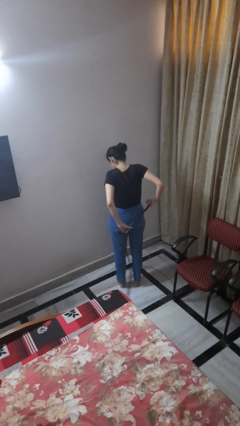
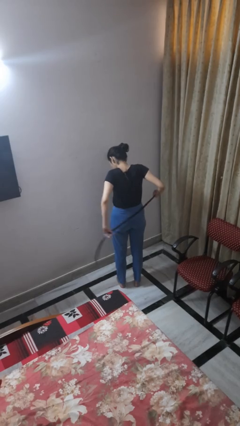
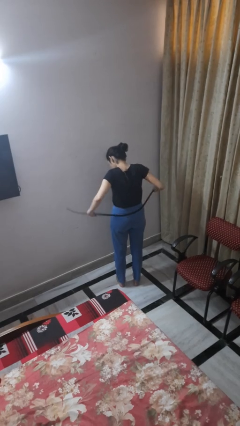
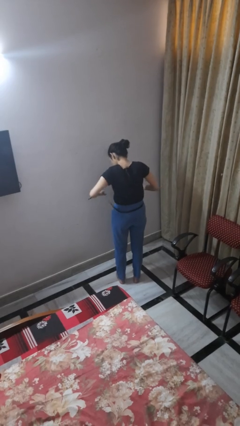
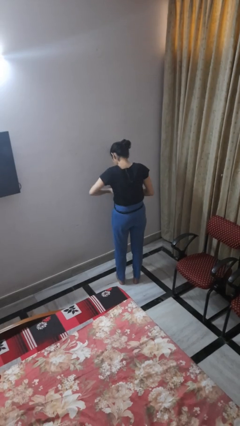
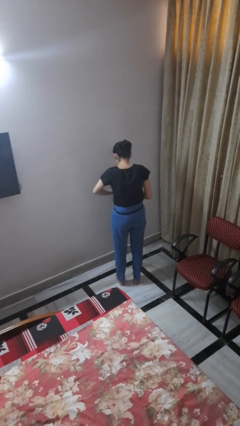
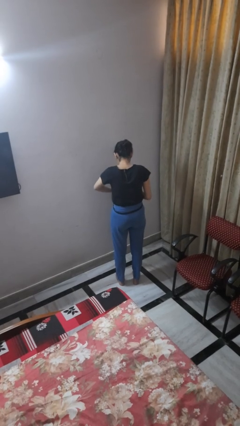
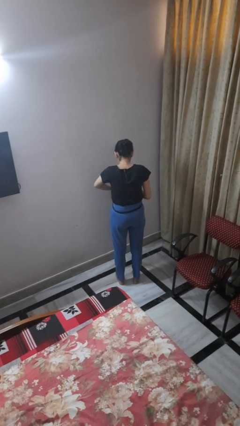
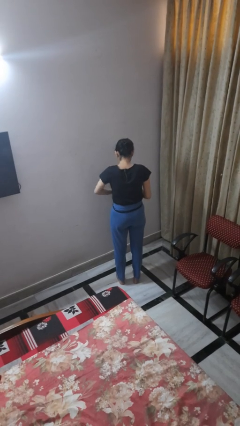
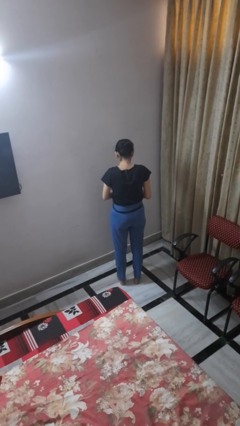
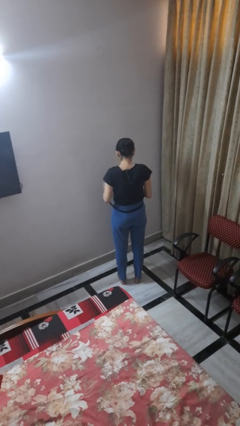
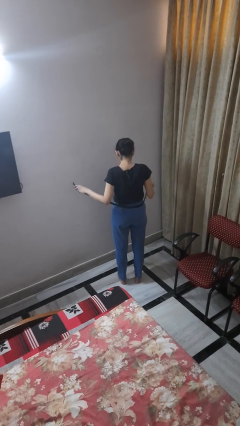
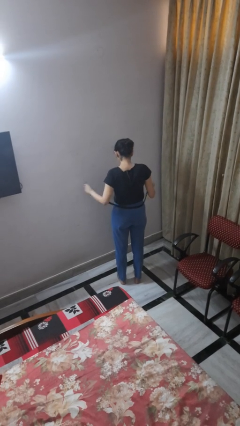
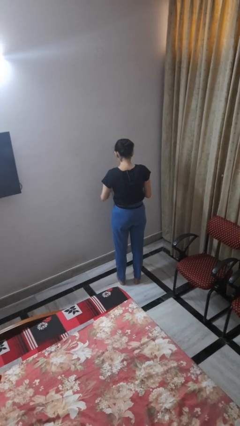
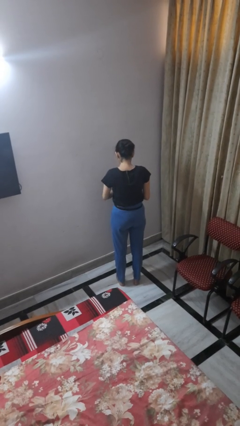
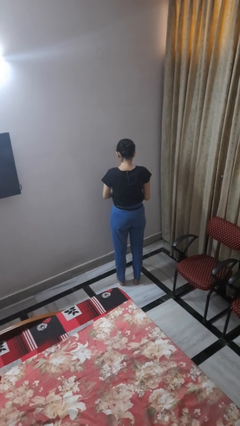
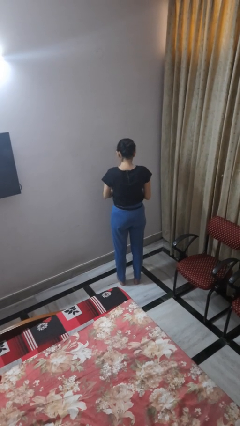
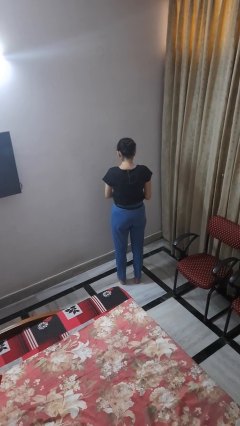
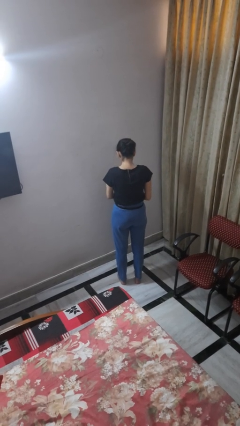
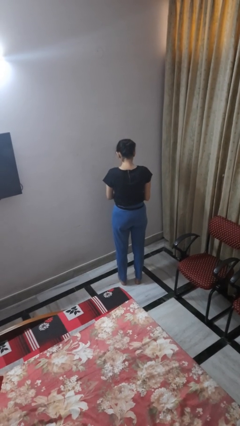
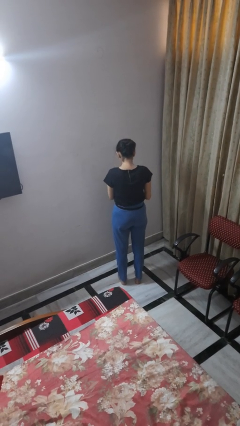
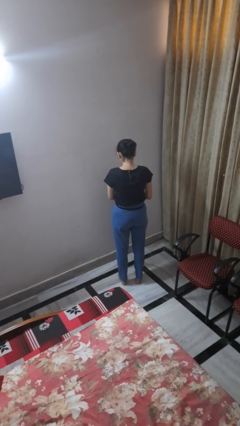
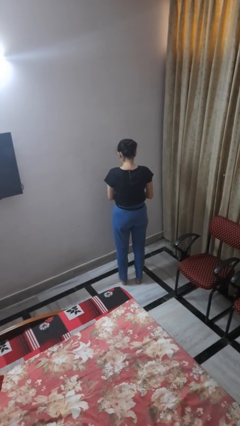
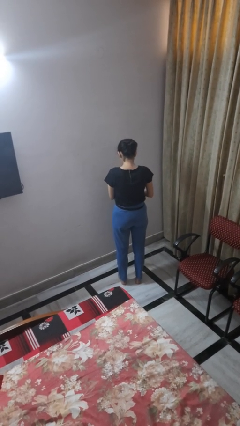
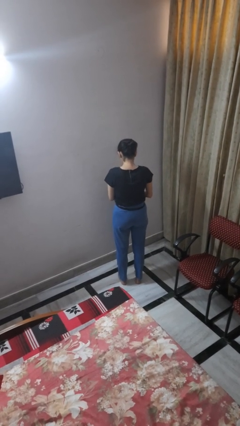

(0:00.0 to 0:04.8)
person puts on belt

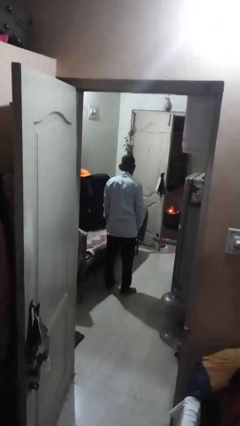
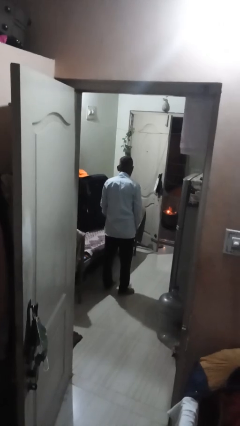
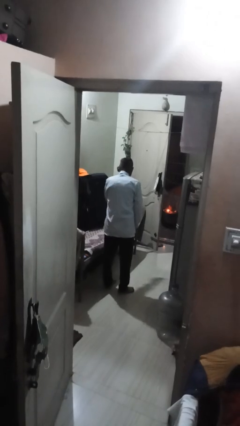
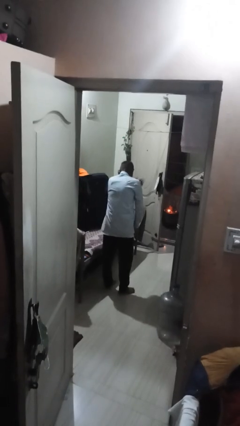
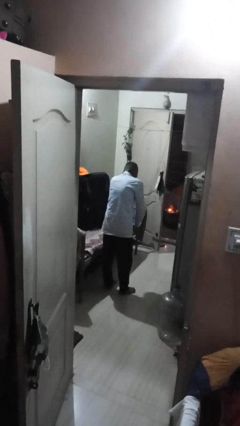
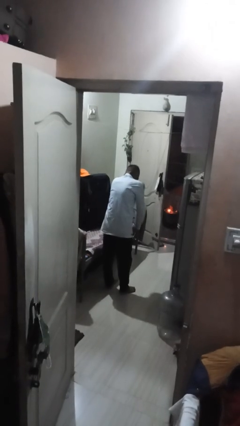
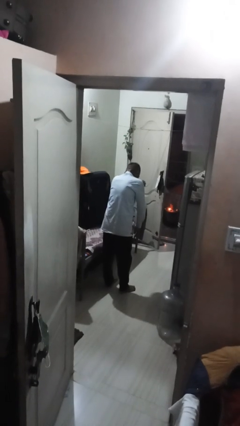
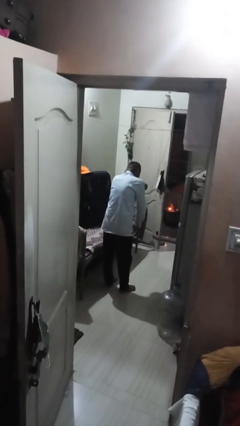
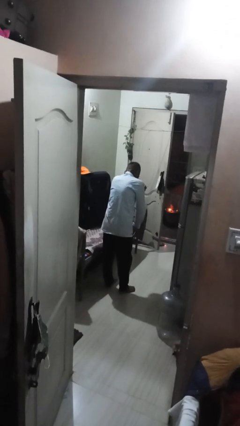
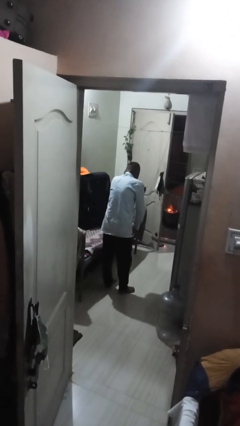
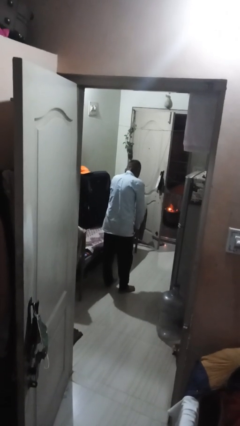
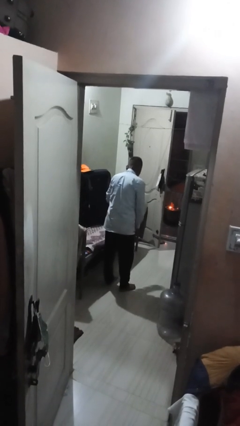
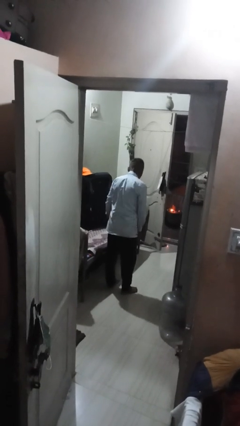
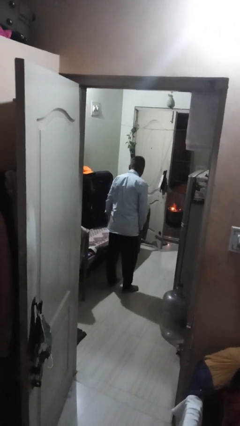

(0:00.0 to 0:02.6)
person swats bug

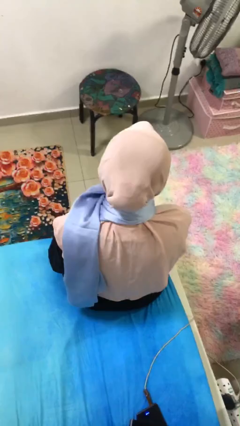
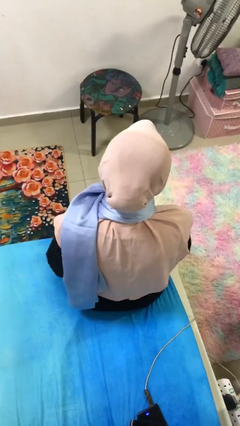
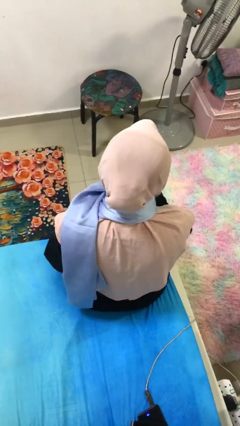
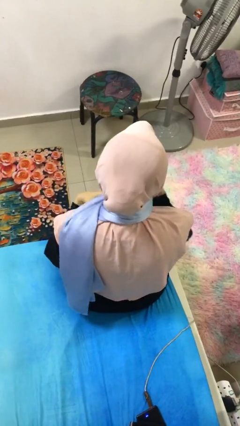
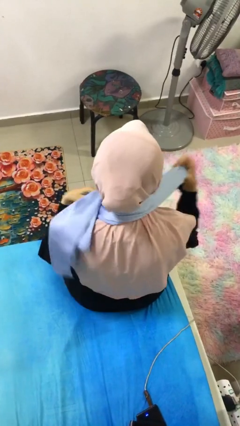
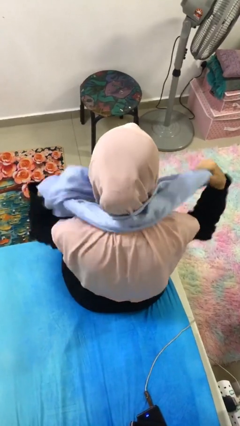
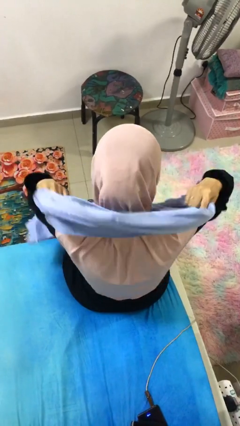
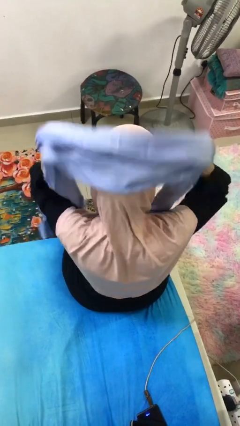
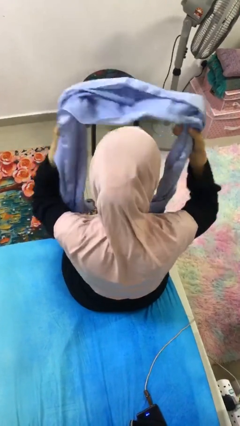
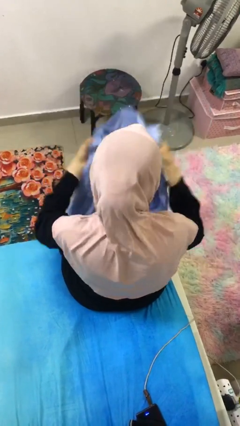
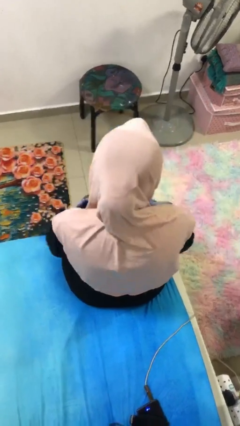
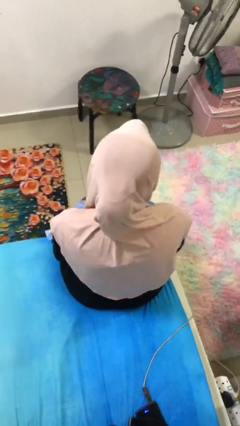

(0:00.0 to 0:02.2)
person takes off scarf

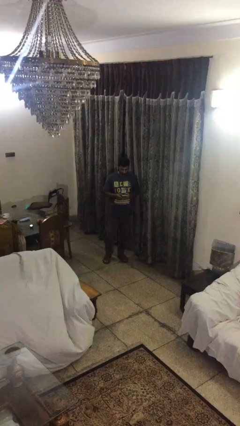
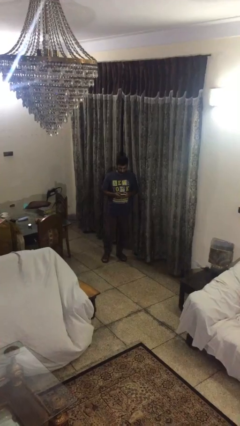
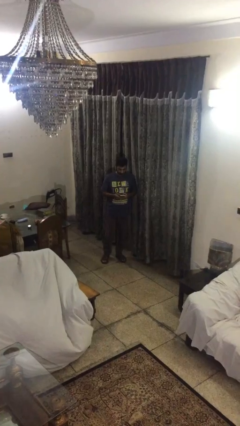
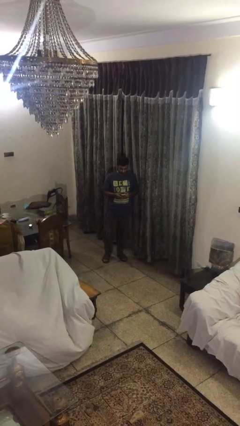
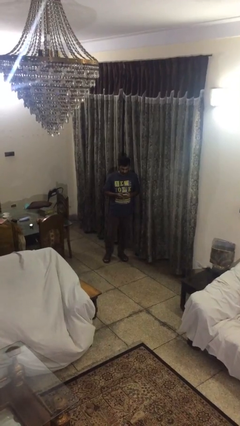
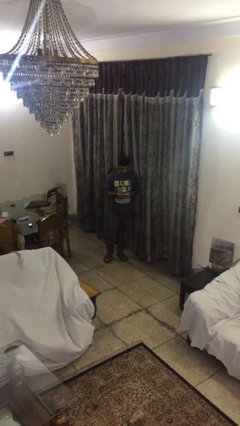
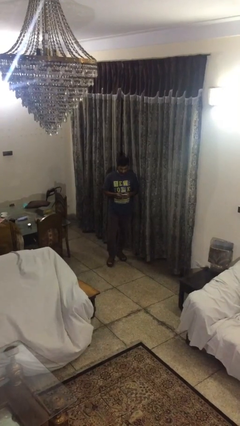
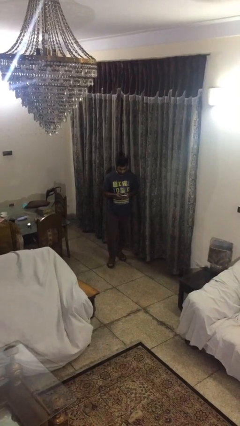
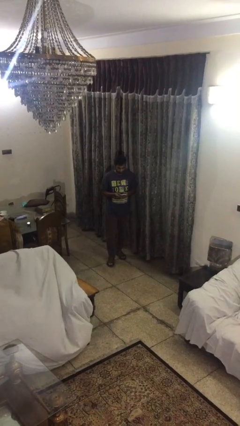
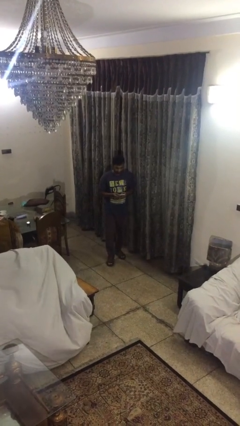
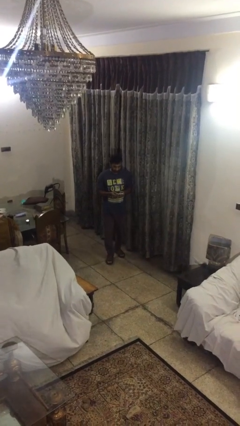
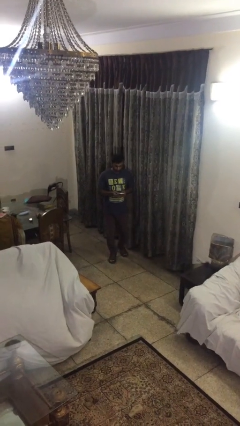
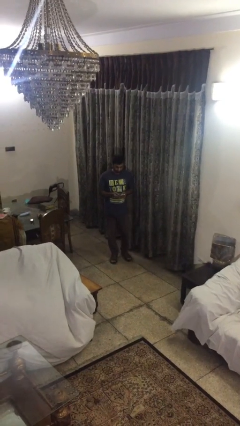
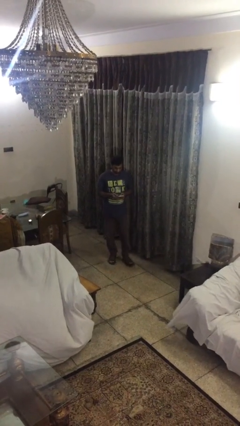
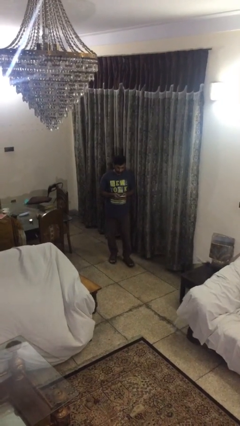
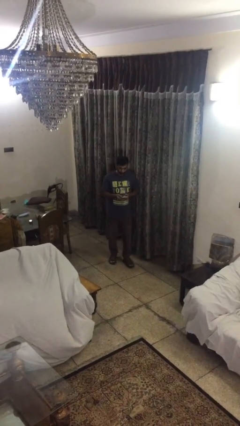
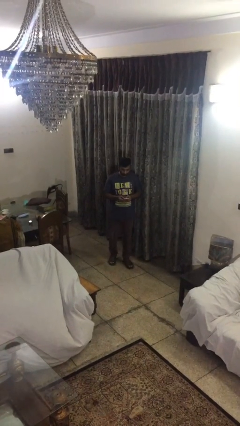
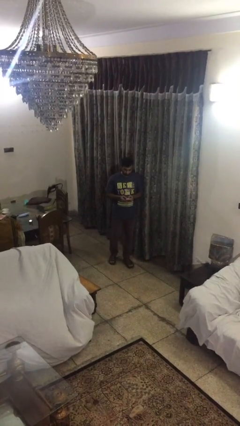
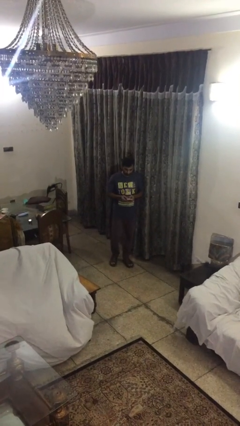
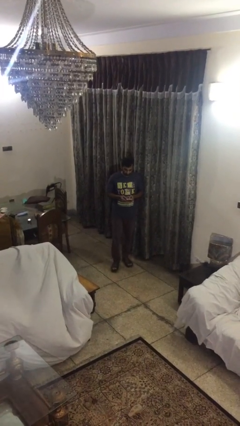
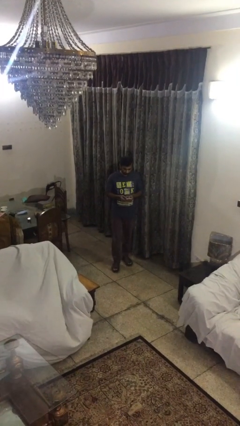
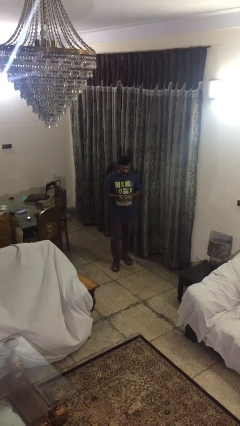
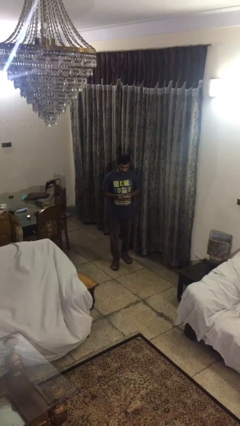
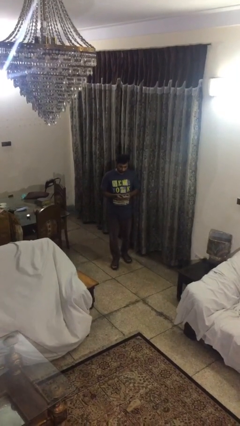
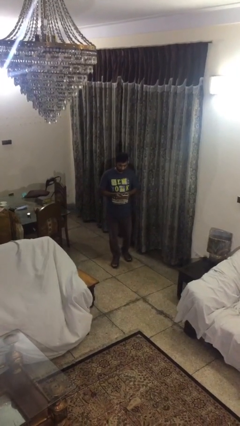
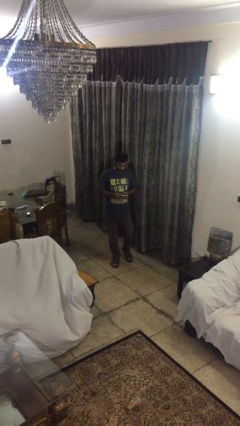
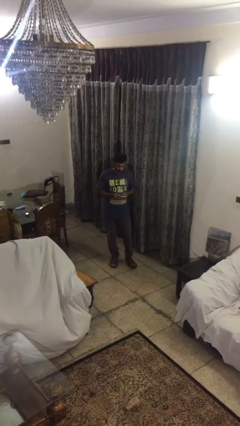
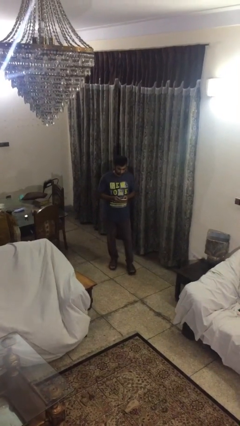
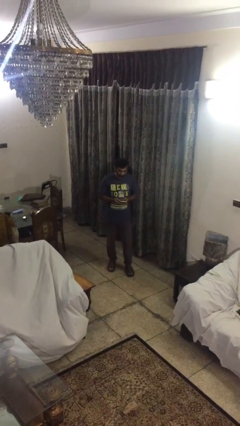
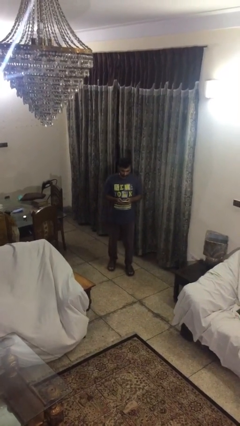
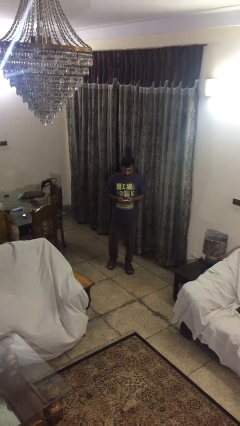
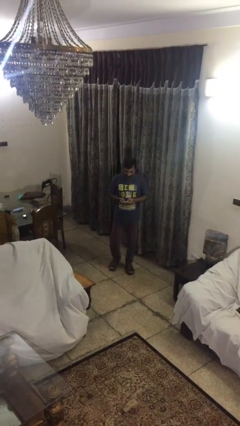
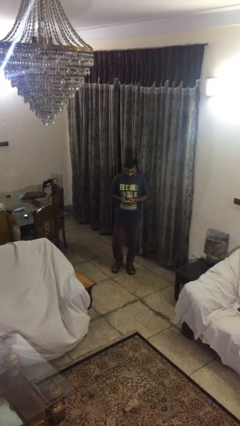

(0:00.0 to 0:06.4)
person texts on phone

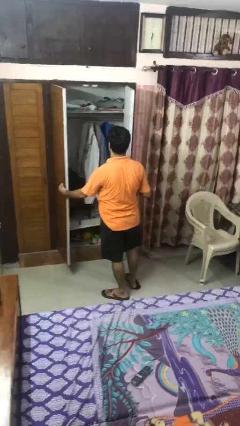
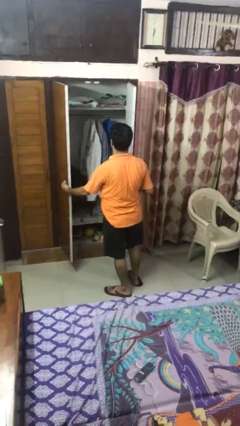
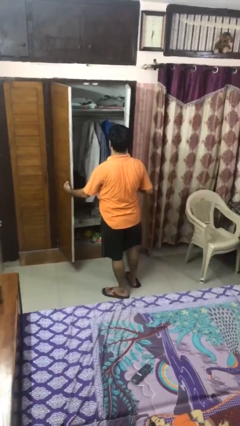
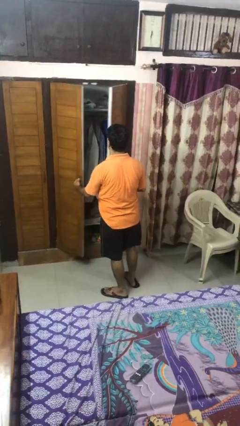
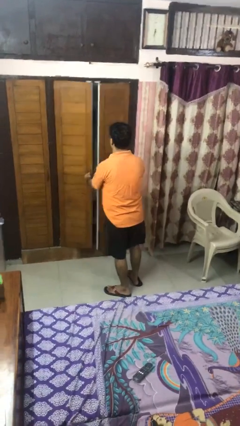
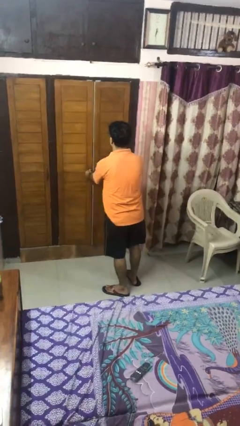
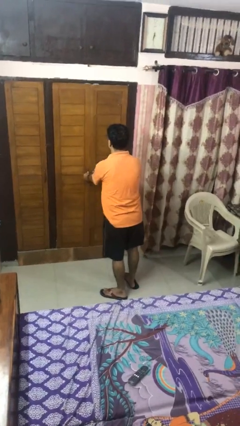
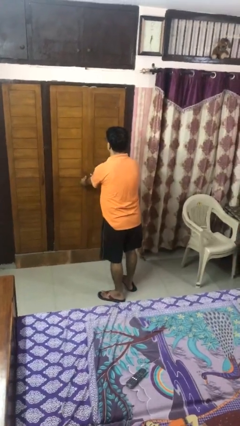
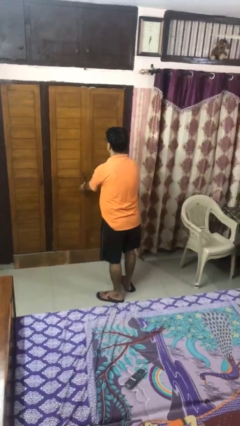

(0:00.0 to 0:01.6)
person closes closet door

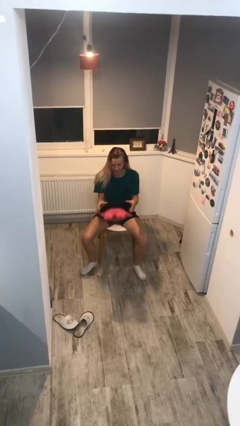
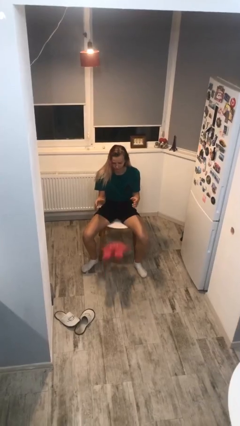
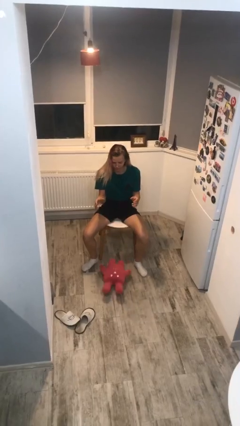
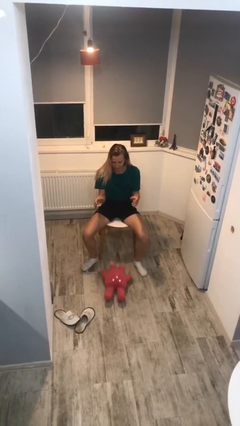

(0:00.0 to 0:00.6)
person drops object
